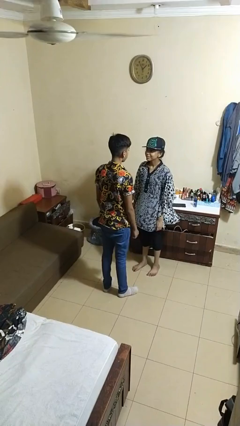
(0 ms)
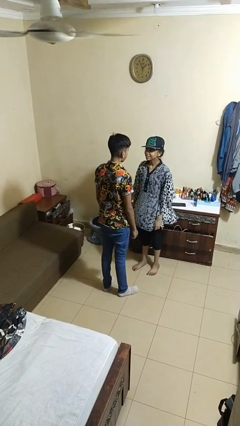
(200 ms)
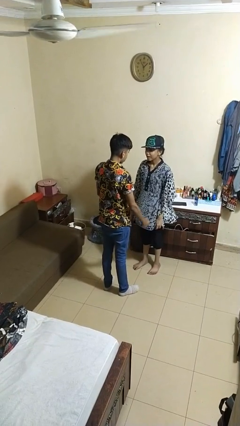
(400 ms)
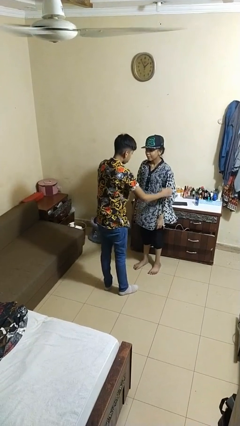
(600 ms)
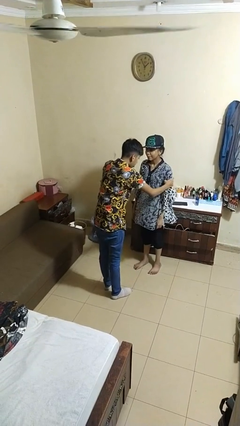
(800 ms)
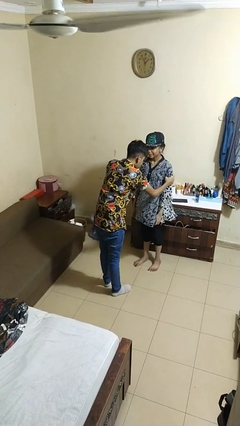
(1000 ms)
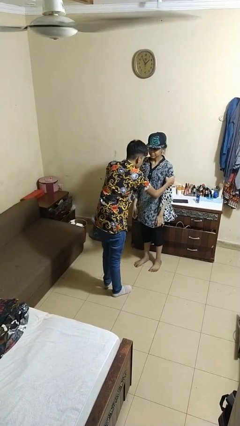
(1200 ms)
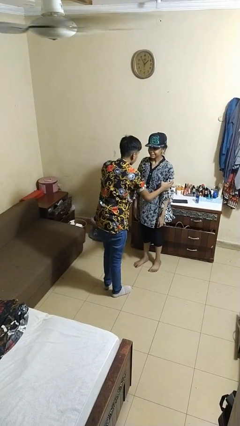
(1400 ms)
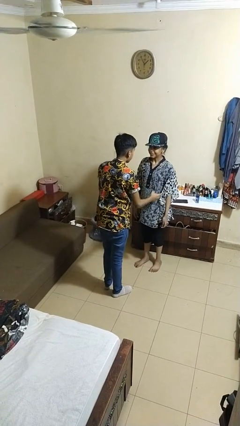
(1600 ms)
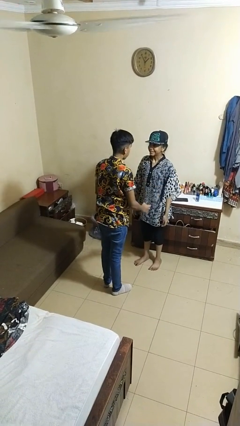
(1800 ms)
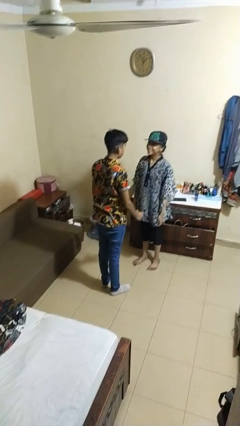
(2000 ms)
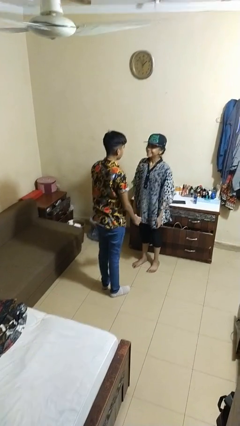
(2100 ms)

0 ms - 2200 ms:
person grabs person by bicep

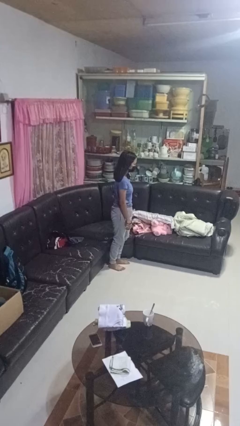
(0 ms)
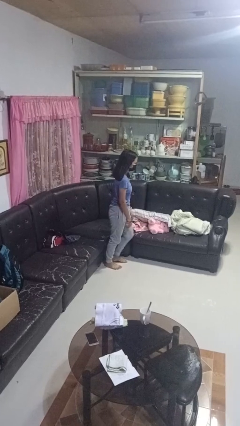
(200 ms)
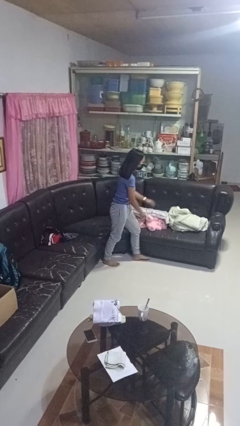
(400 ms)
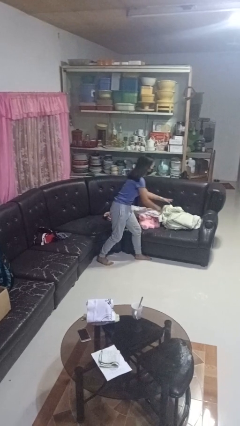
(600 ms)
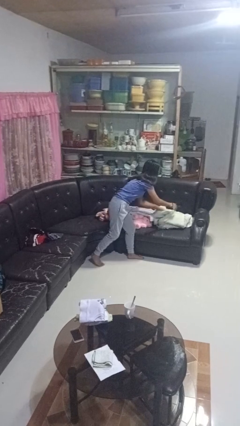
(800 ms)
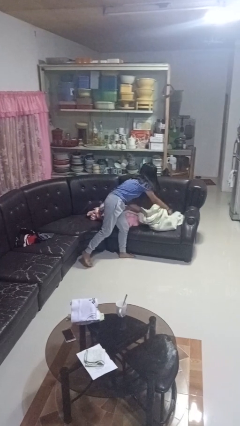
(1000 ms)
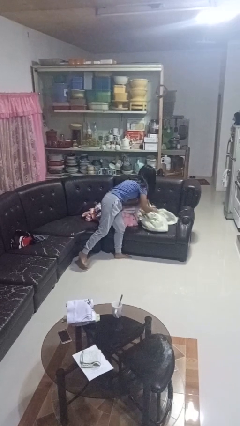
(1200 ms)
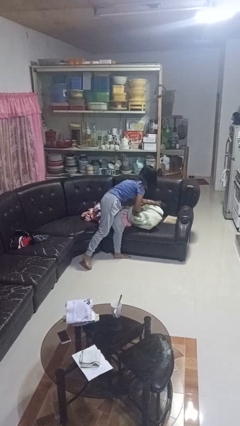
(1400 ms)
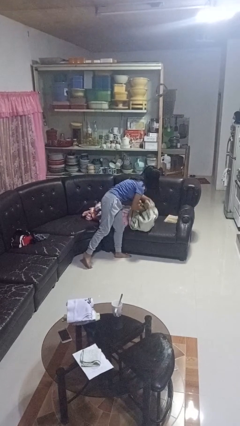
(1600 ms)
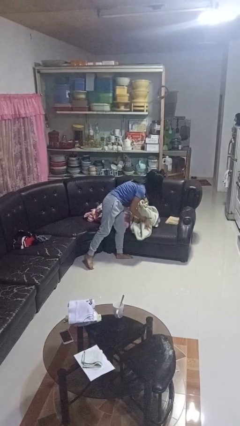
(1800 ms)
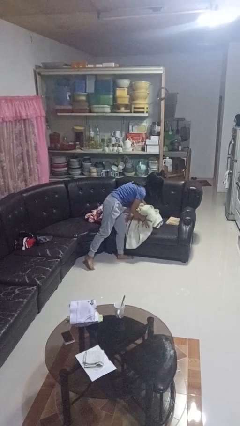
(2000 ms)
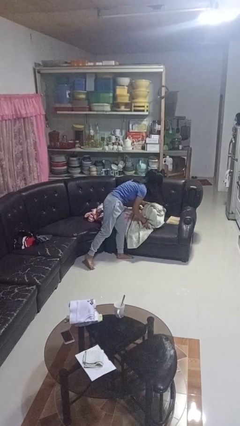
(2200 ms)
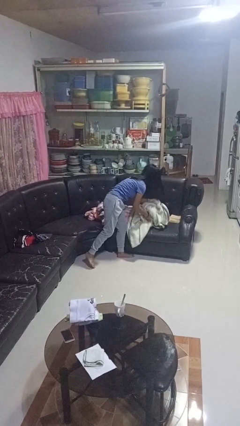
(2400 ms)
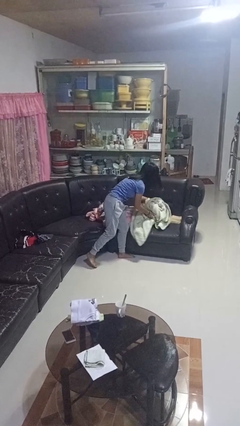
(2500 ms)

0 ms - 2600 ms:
person searches in couch

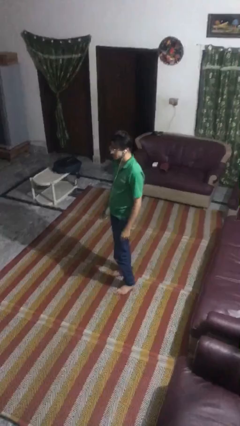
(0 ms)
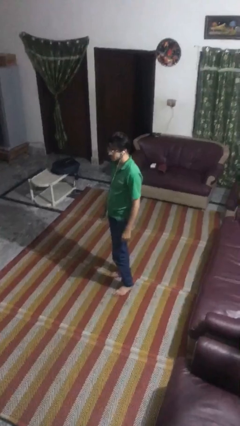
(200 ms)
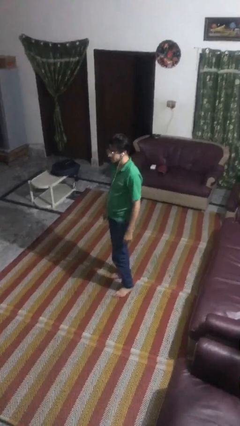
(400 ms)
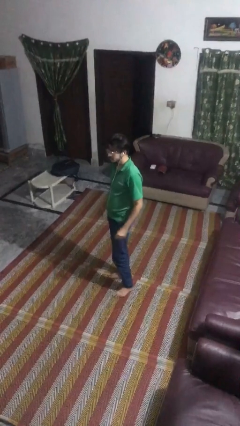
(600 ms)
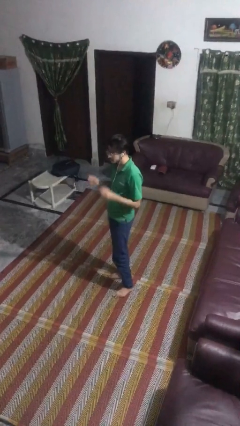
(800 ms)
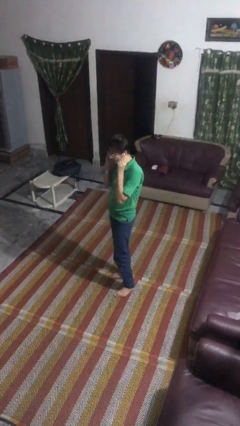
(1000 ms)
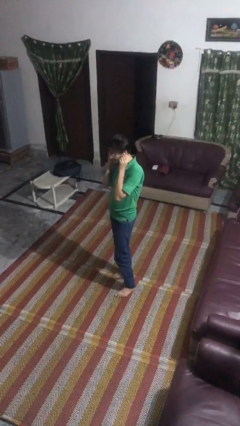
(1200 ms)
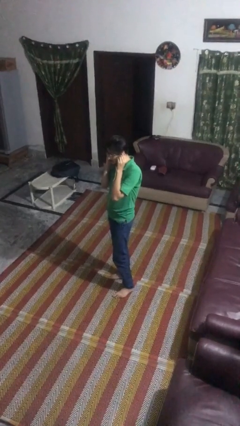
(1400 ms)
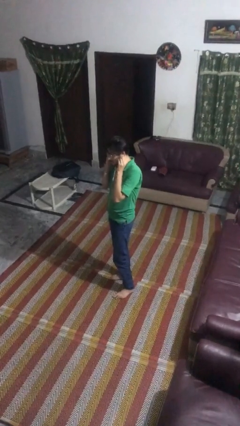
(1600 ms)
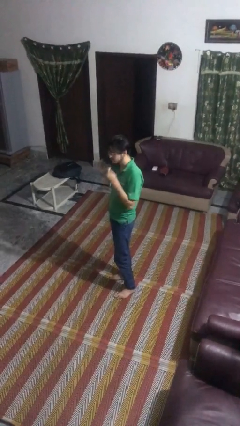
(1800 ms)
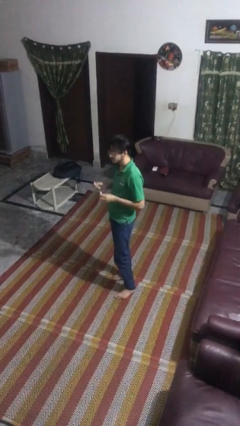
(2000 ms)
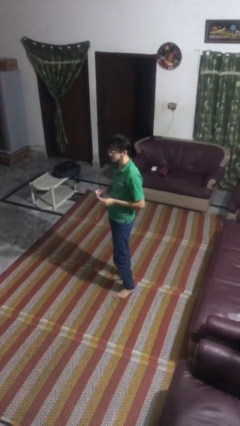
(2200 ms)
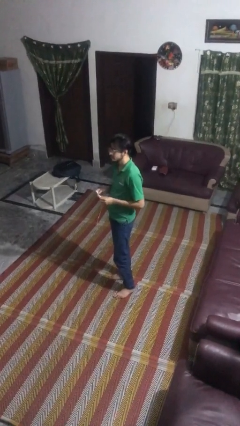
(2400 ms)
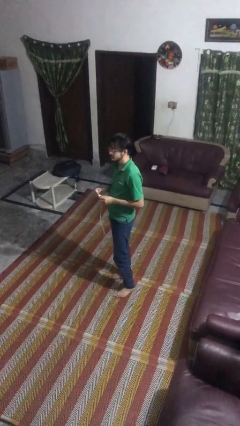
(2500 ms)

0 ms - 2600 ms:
person takes off headphones

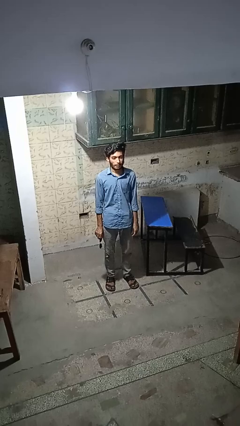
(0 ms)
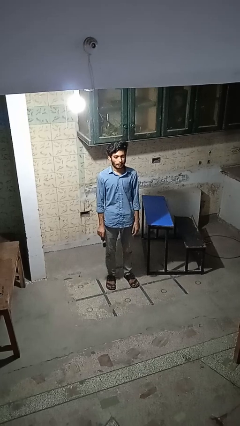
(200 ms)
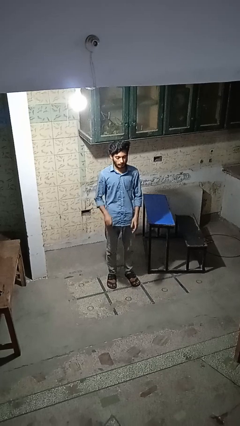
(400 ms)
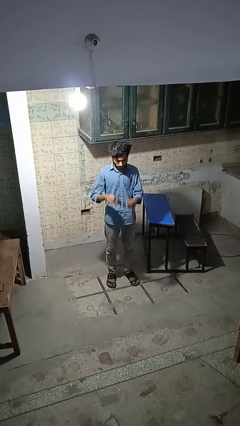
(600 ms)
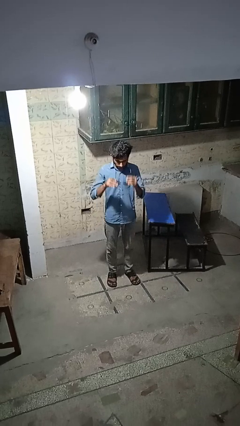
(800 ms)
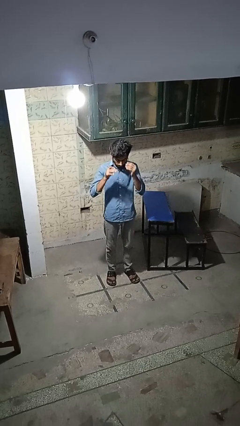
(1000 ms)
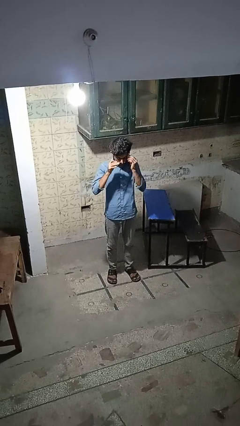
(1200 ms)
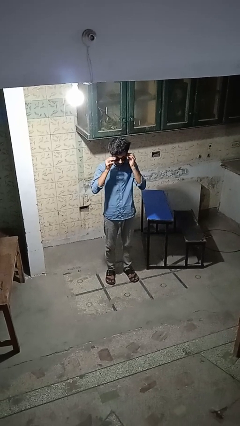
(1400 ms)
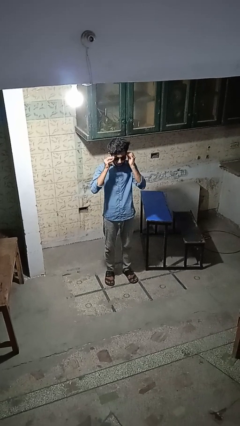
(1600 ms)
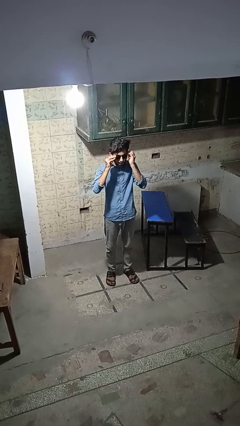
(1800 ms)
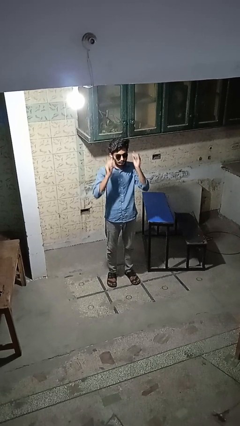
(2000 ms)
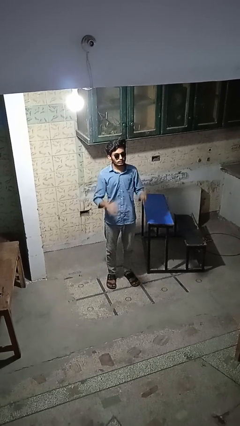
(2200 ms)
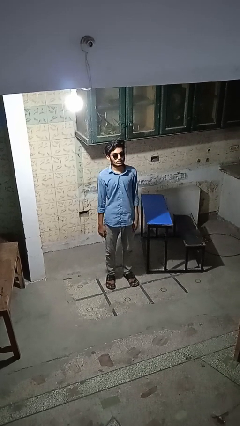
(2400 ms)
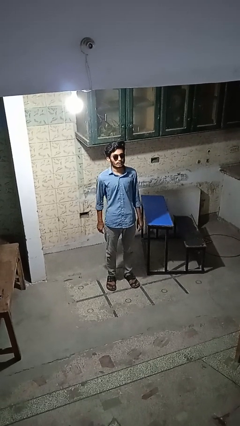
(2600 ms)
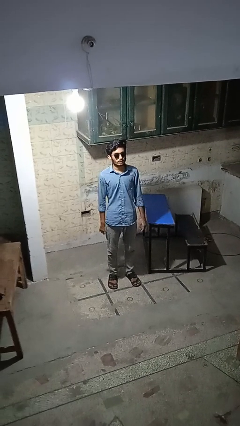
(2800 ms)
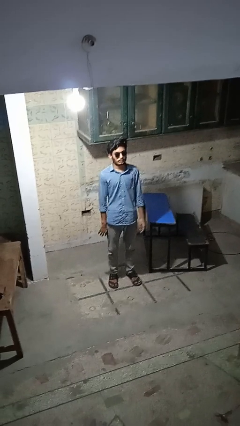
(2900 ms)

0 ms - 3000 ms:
person puts on sunglasses

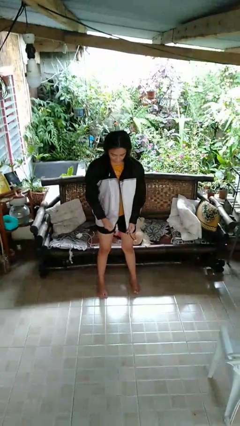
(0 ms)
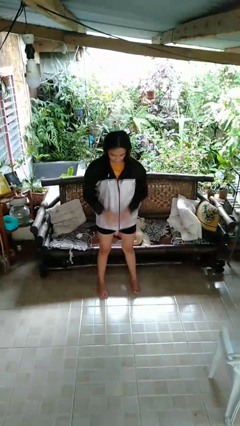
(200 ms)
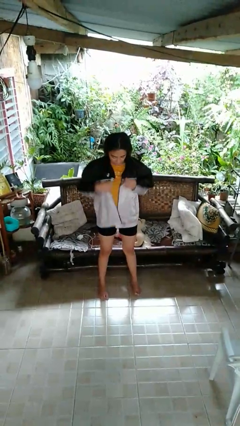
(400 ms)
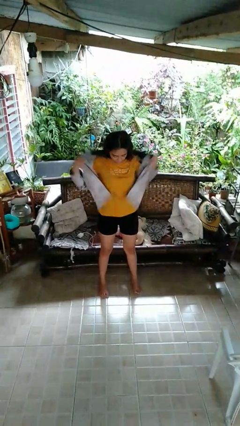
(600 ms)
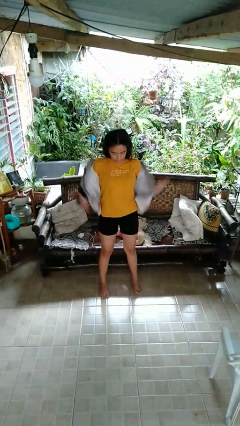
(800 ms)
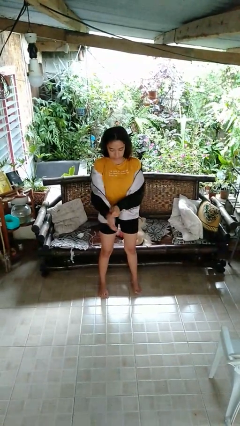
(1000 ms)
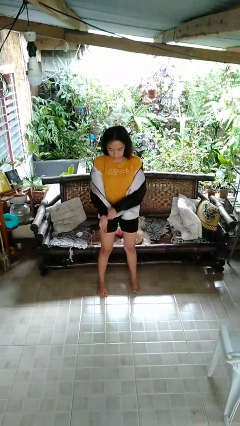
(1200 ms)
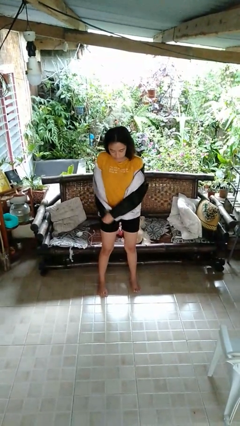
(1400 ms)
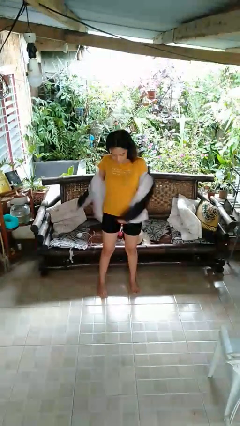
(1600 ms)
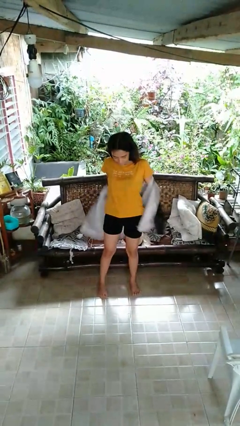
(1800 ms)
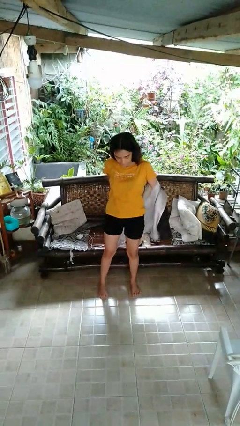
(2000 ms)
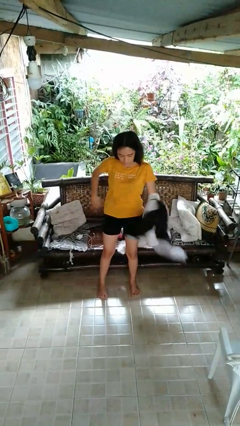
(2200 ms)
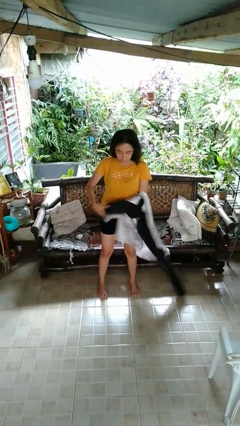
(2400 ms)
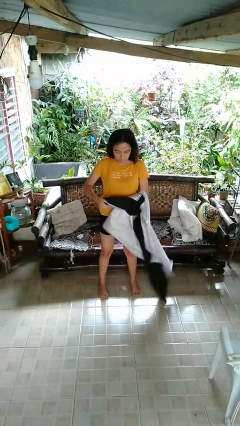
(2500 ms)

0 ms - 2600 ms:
person takes off jacket

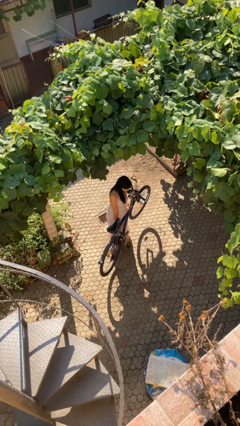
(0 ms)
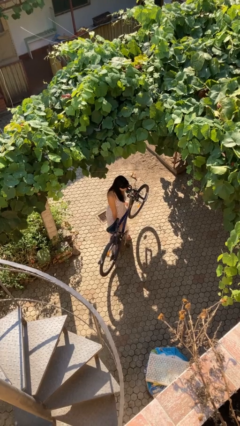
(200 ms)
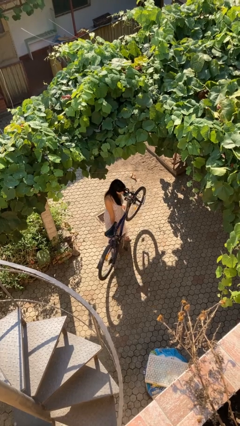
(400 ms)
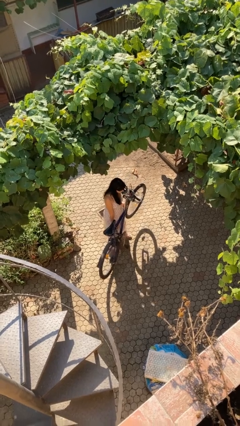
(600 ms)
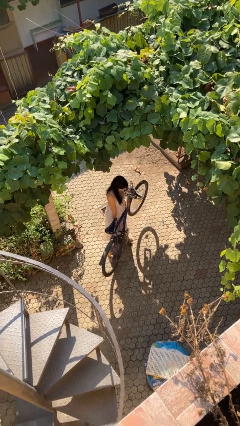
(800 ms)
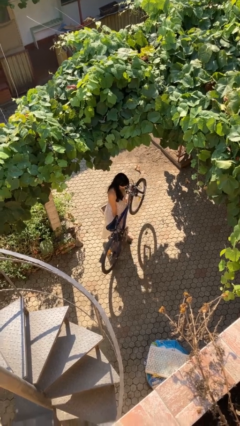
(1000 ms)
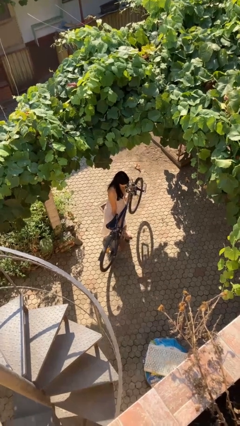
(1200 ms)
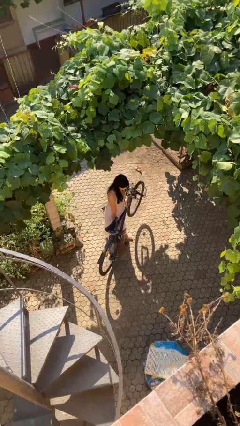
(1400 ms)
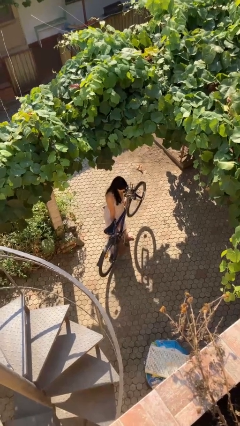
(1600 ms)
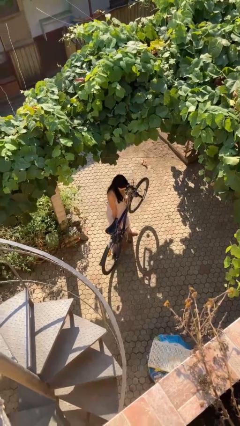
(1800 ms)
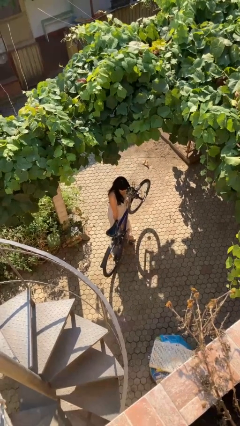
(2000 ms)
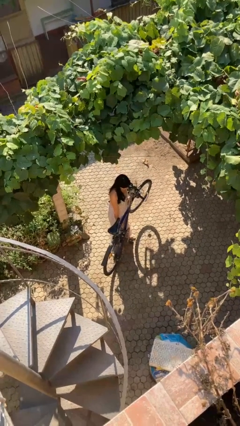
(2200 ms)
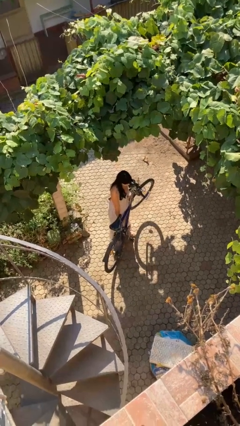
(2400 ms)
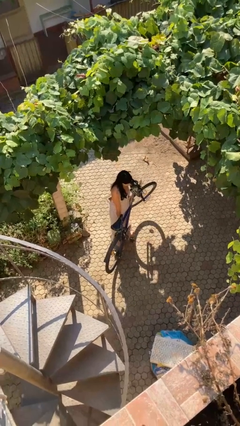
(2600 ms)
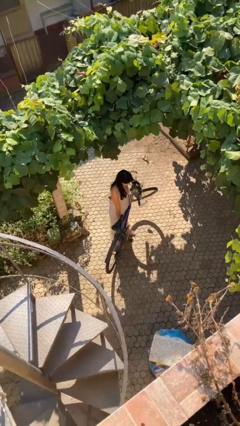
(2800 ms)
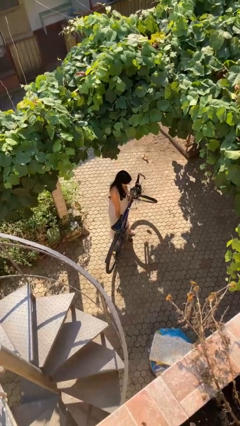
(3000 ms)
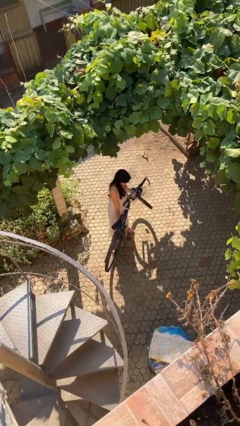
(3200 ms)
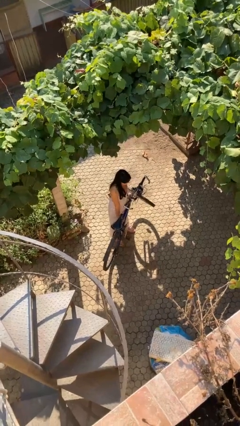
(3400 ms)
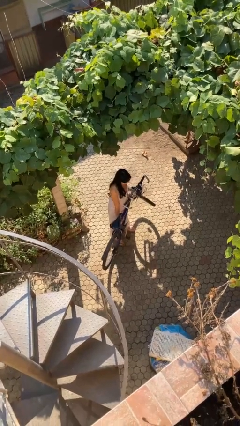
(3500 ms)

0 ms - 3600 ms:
person carries bicycle

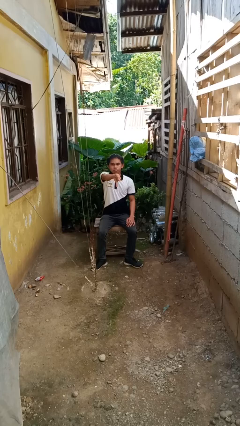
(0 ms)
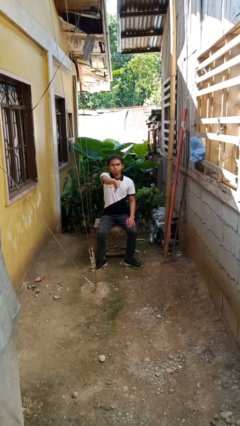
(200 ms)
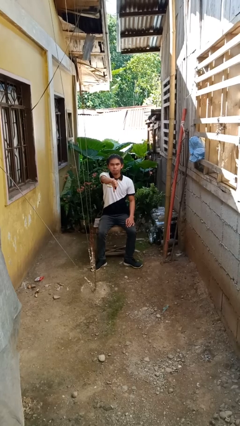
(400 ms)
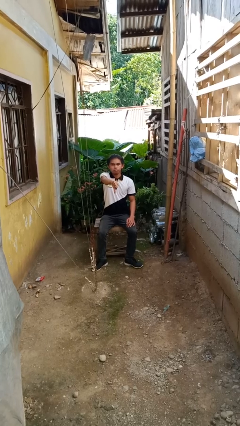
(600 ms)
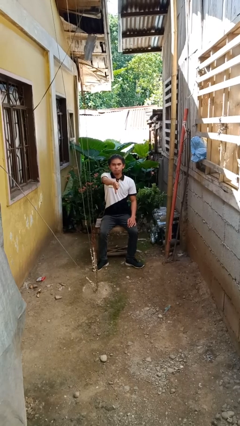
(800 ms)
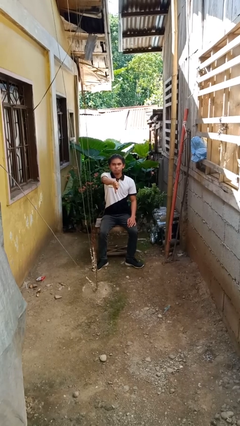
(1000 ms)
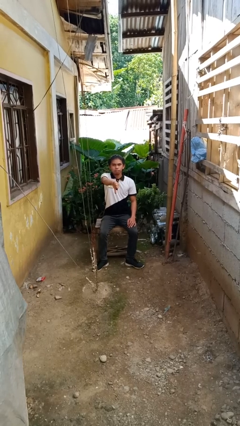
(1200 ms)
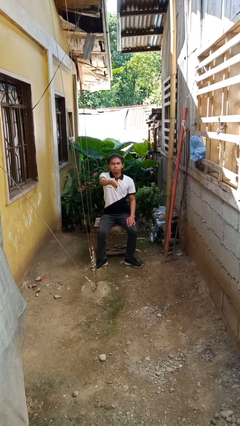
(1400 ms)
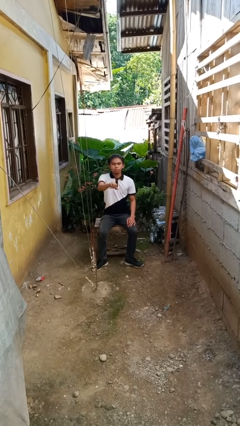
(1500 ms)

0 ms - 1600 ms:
person gestures thumbs down
